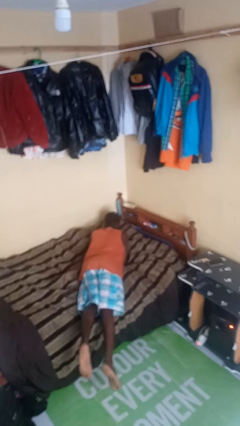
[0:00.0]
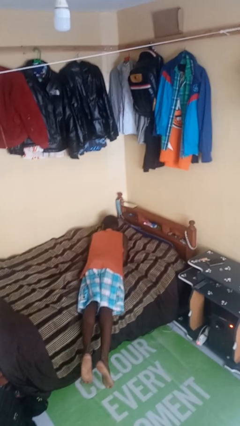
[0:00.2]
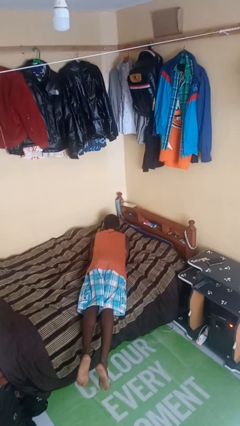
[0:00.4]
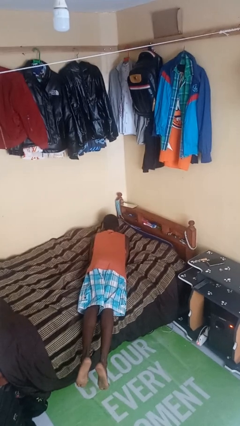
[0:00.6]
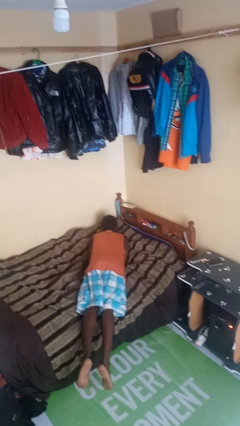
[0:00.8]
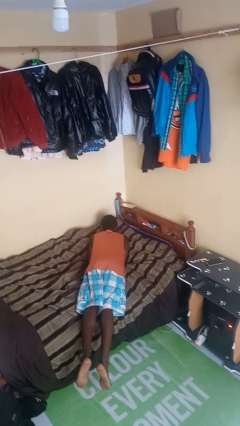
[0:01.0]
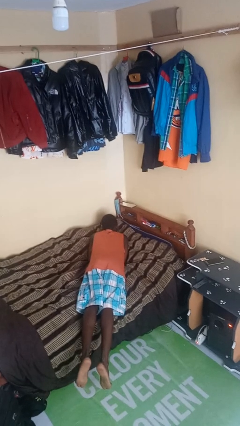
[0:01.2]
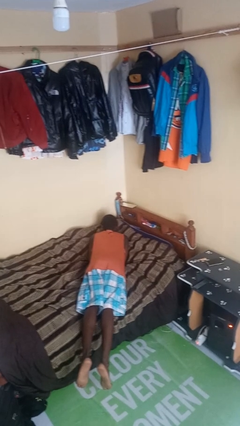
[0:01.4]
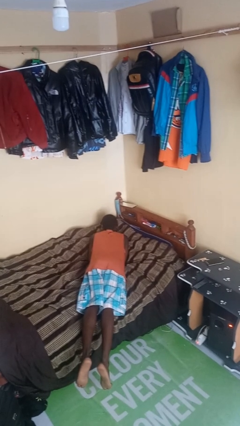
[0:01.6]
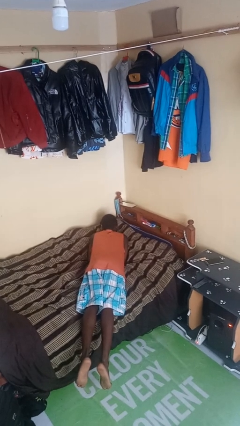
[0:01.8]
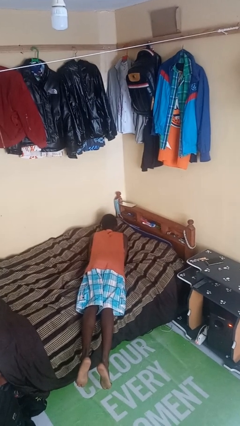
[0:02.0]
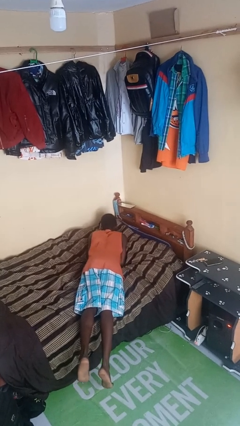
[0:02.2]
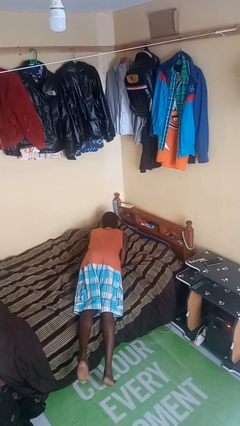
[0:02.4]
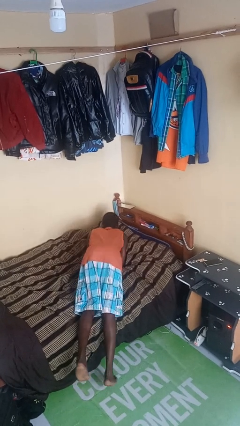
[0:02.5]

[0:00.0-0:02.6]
person lies down on bed

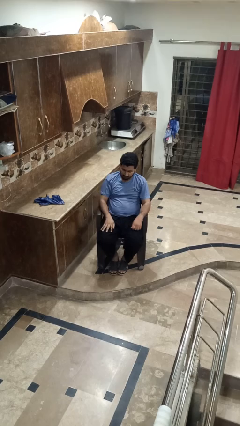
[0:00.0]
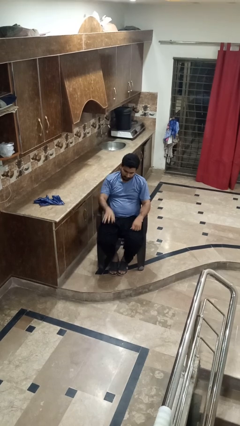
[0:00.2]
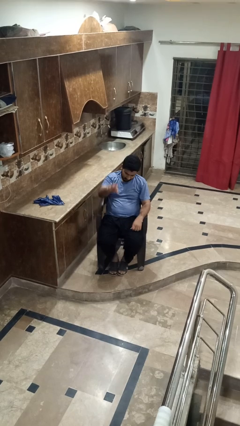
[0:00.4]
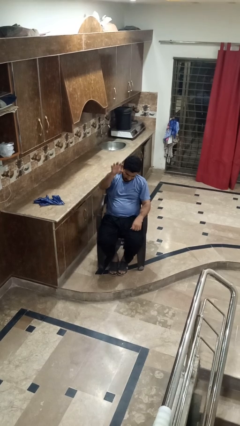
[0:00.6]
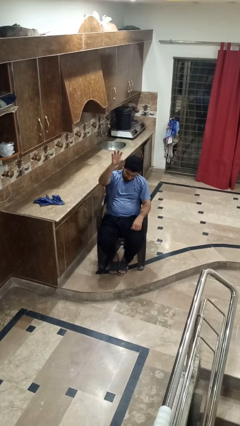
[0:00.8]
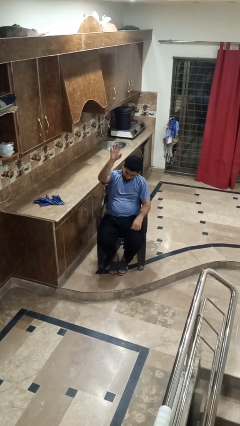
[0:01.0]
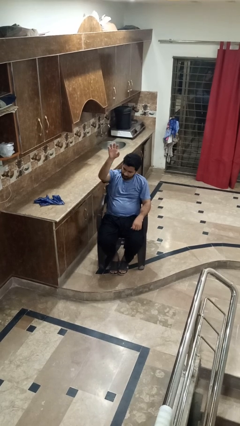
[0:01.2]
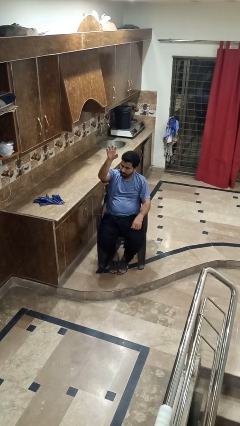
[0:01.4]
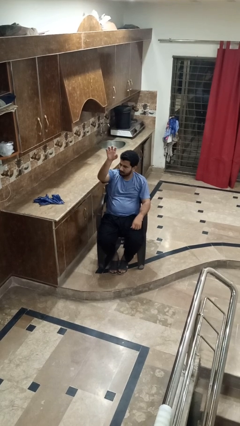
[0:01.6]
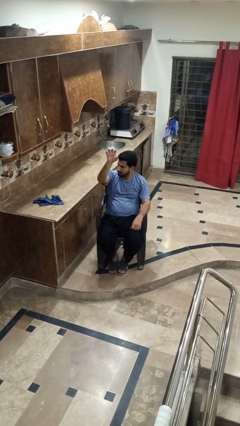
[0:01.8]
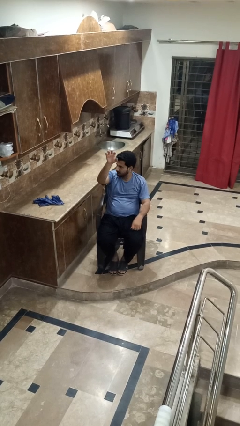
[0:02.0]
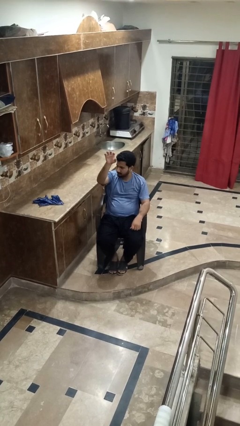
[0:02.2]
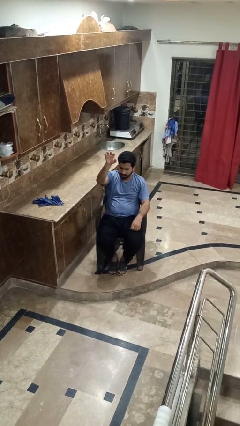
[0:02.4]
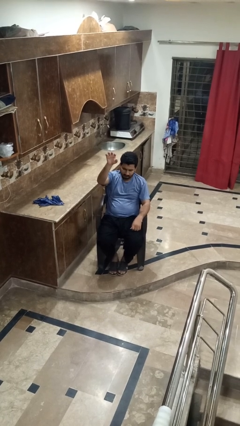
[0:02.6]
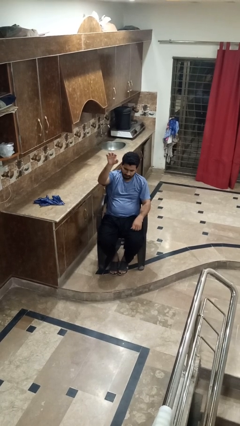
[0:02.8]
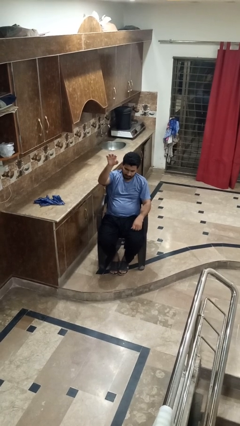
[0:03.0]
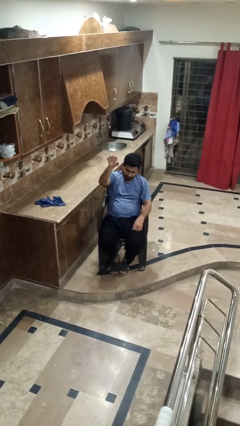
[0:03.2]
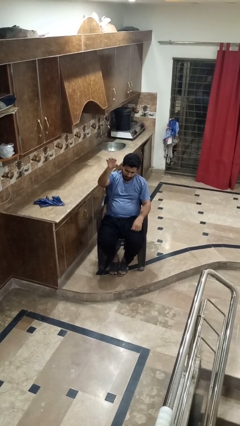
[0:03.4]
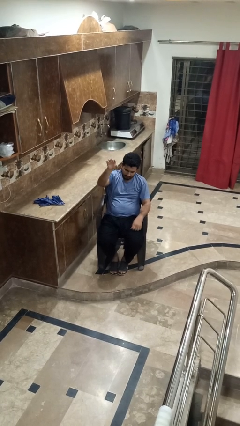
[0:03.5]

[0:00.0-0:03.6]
person gestures raise hand

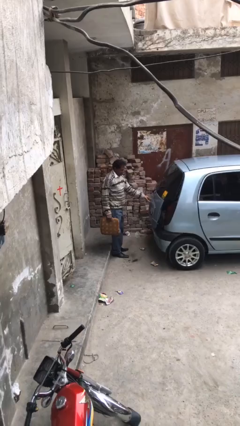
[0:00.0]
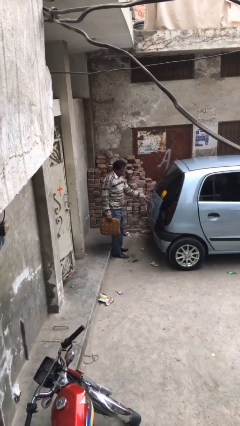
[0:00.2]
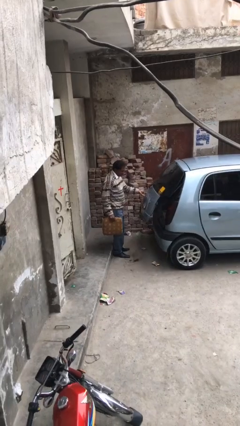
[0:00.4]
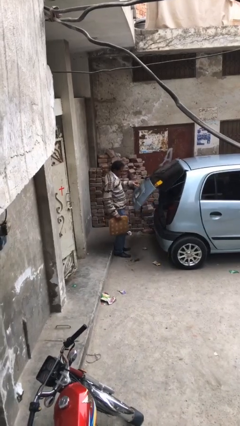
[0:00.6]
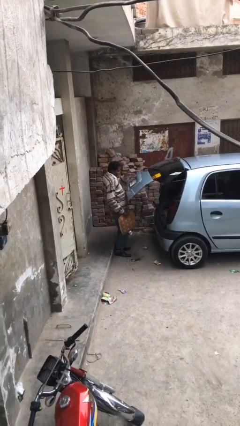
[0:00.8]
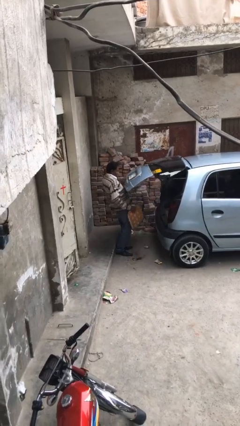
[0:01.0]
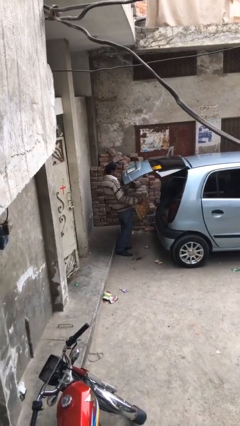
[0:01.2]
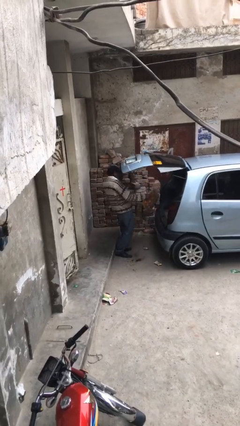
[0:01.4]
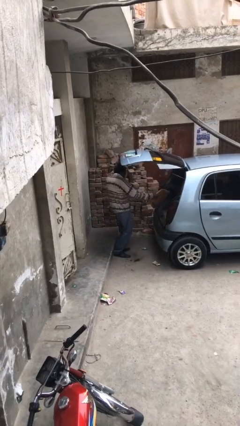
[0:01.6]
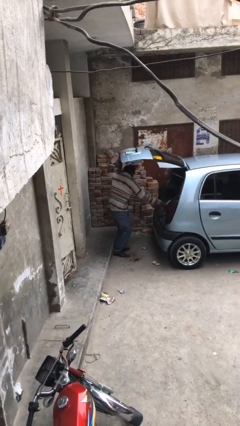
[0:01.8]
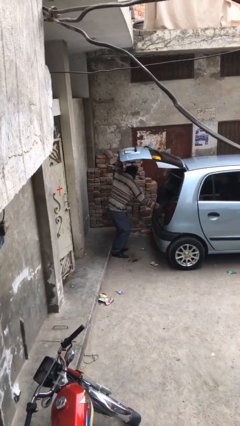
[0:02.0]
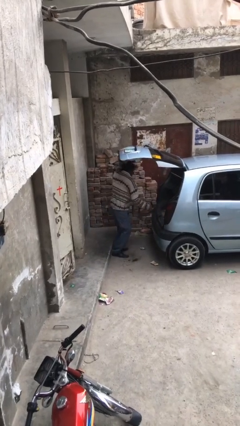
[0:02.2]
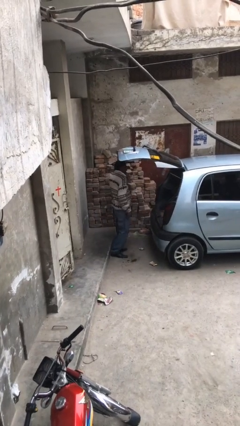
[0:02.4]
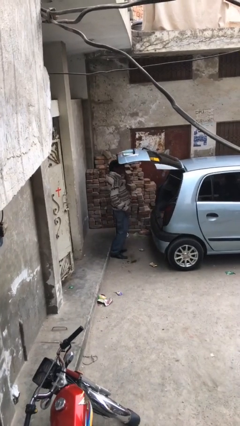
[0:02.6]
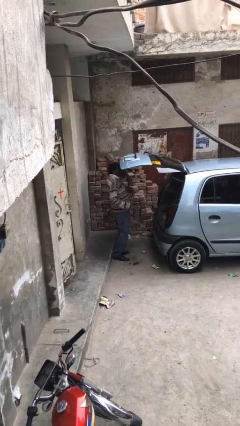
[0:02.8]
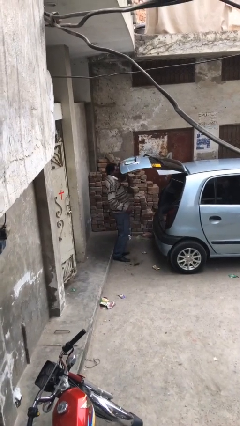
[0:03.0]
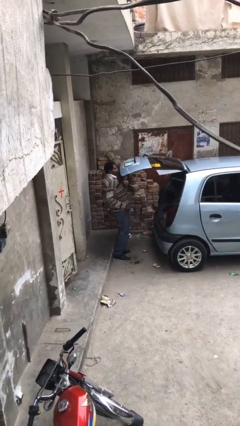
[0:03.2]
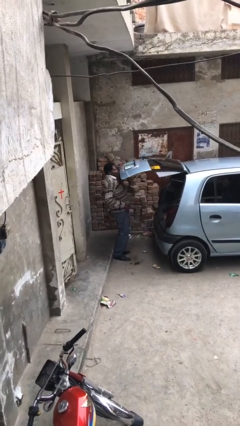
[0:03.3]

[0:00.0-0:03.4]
person loads car

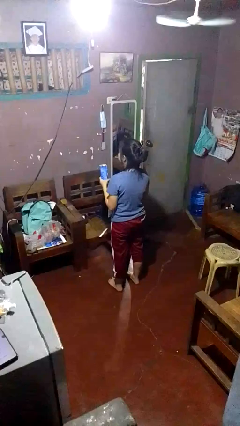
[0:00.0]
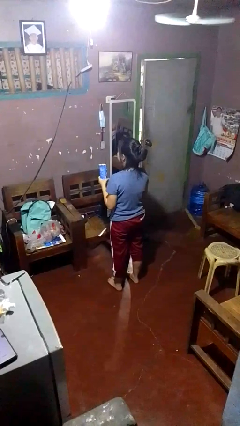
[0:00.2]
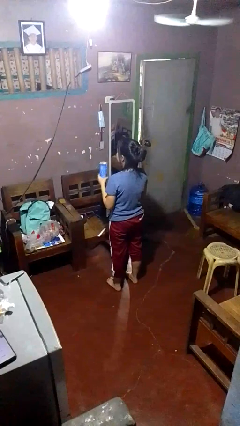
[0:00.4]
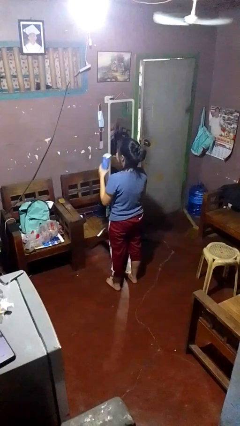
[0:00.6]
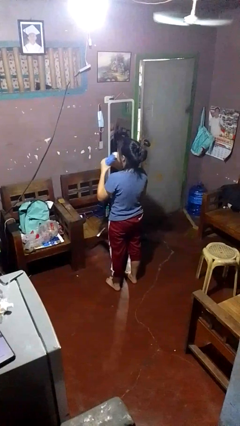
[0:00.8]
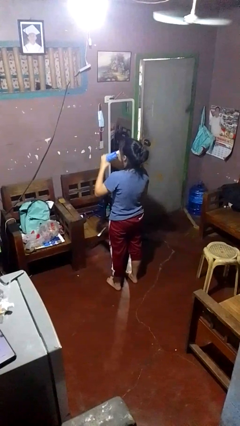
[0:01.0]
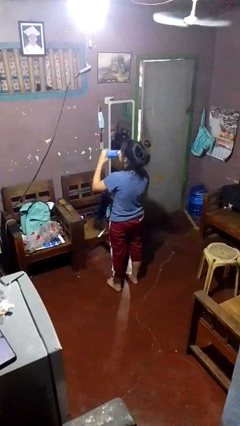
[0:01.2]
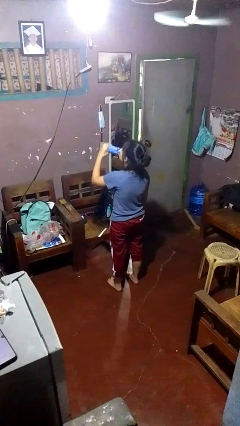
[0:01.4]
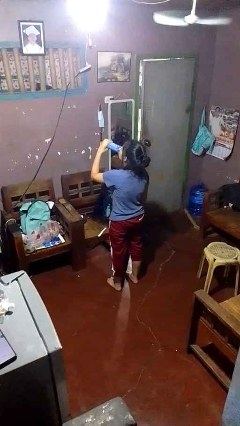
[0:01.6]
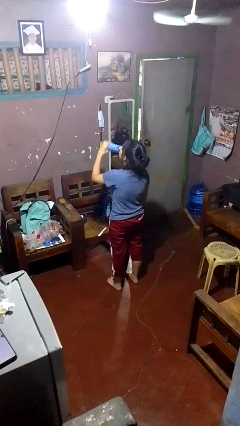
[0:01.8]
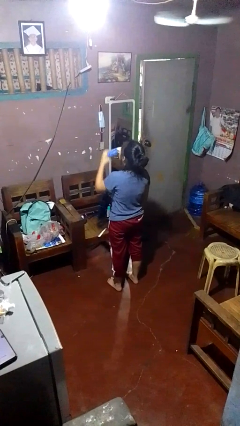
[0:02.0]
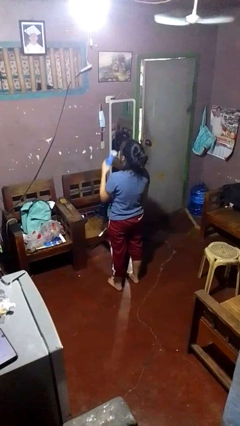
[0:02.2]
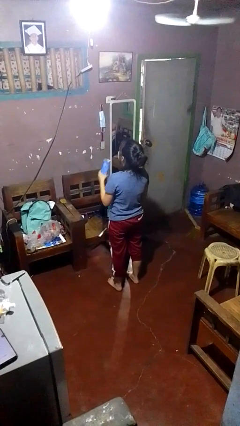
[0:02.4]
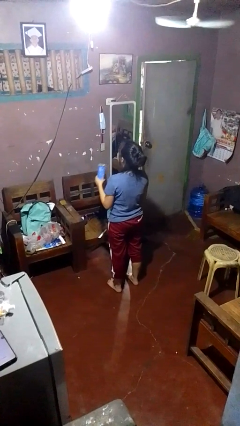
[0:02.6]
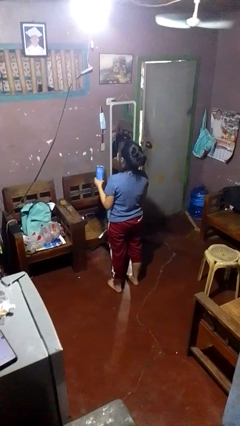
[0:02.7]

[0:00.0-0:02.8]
person drinks from beverage can

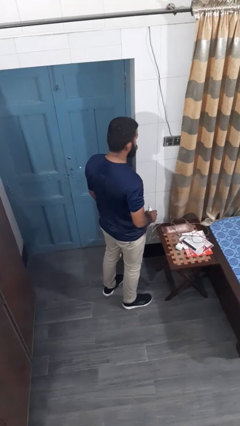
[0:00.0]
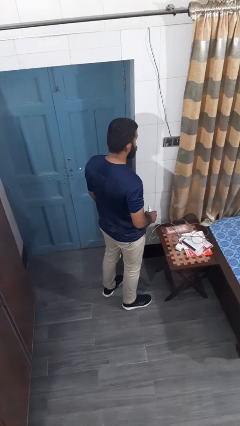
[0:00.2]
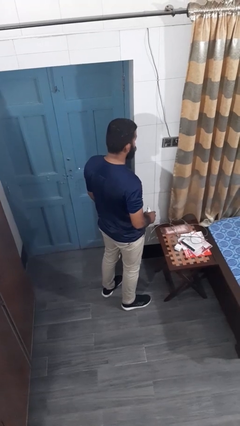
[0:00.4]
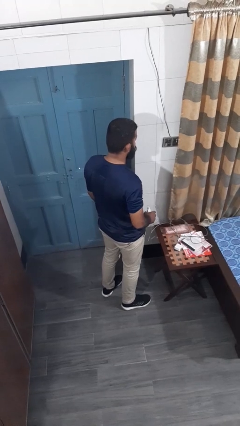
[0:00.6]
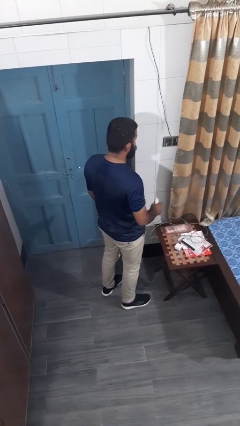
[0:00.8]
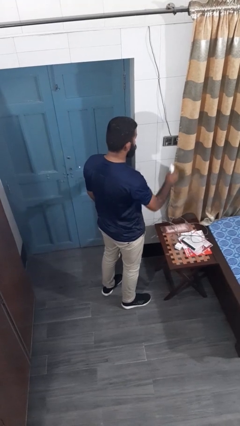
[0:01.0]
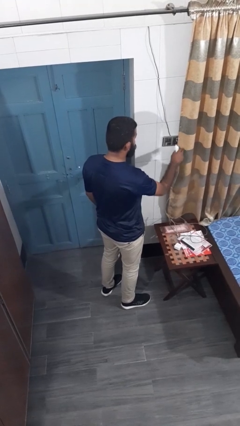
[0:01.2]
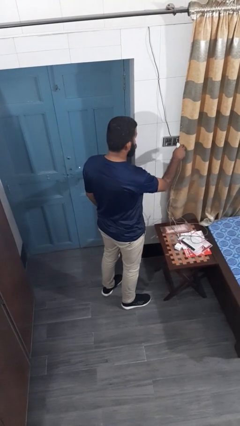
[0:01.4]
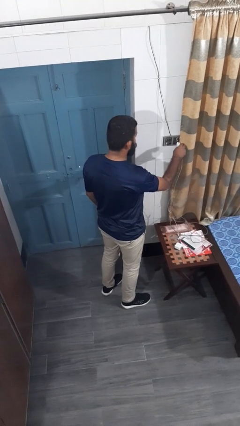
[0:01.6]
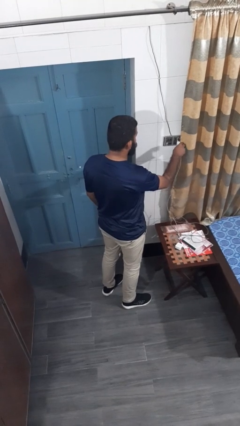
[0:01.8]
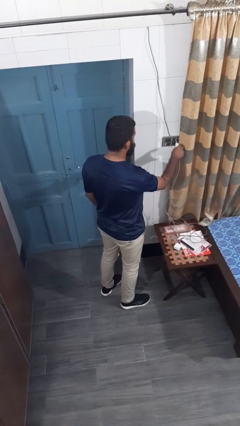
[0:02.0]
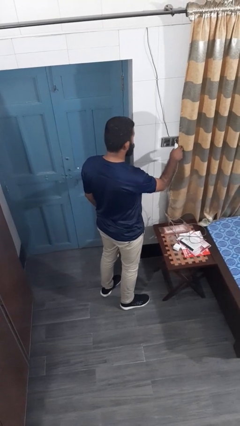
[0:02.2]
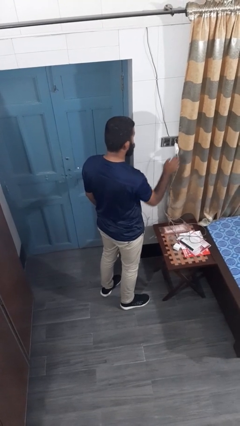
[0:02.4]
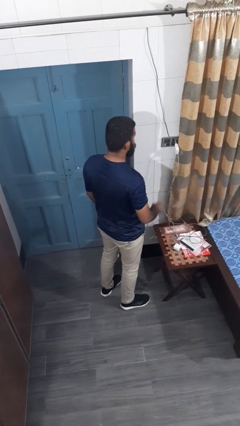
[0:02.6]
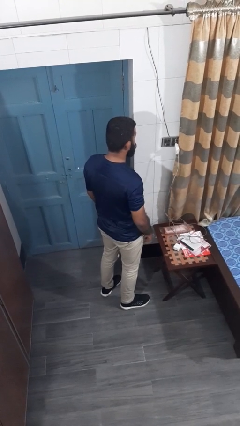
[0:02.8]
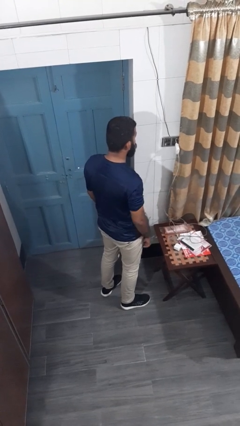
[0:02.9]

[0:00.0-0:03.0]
person plugs into electrical socket

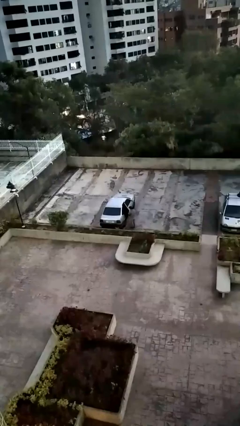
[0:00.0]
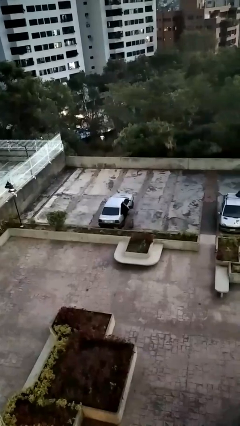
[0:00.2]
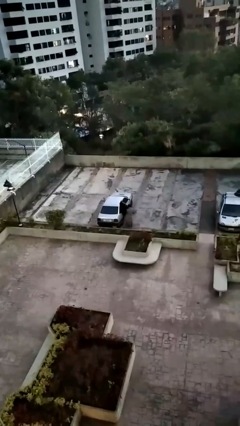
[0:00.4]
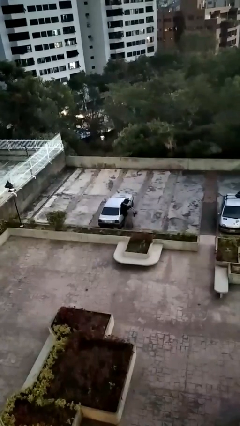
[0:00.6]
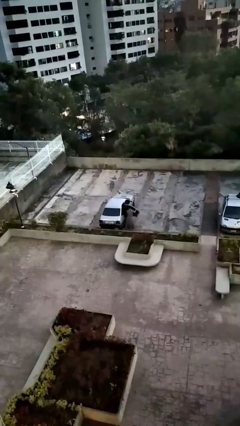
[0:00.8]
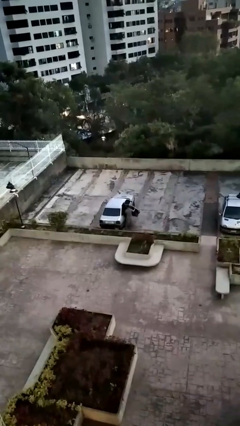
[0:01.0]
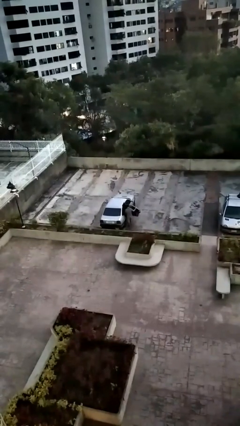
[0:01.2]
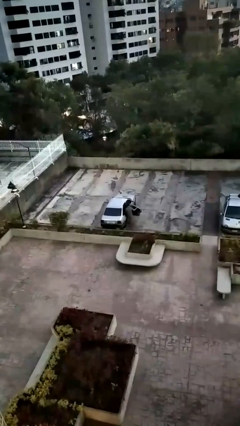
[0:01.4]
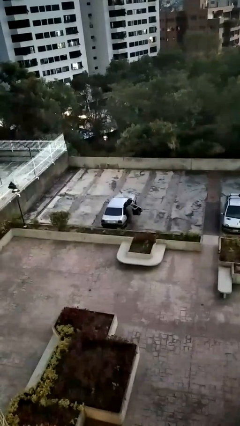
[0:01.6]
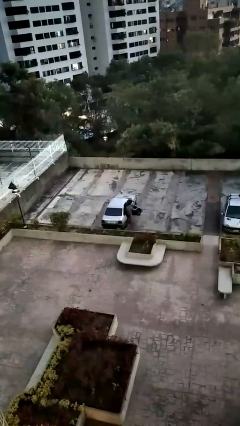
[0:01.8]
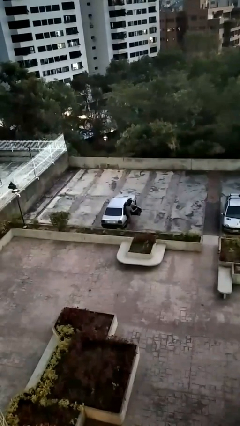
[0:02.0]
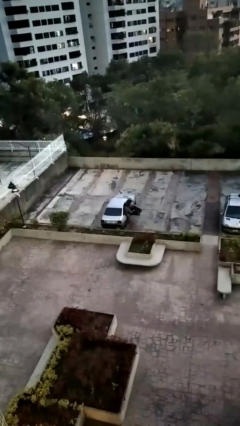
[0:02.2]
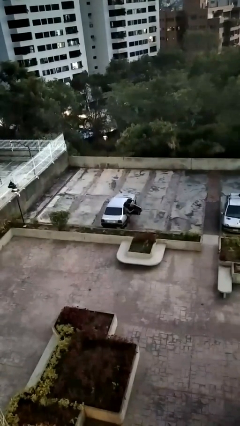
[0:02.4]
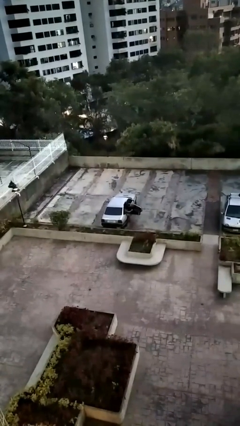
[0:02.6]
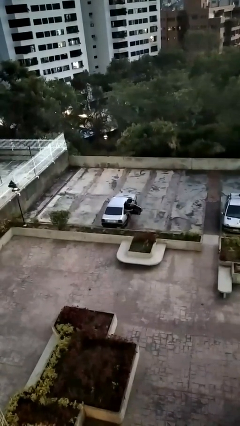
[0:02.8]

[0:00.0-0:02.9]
car picks up person
